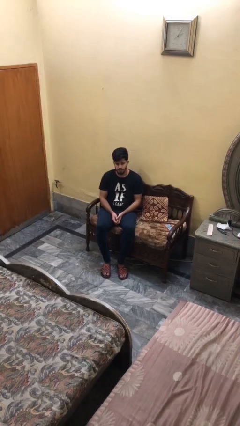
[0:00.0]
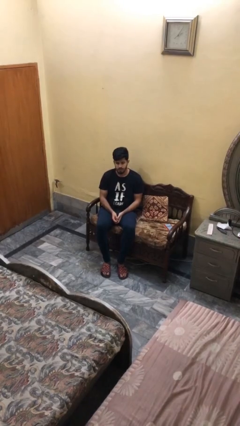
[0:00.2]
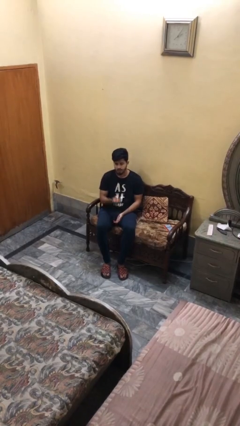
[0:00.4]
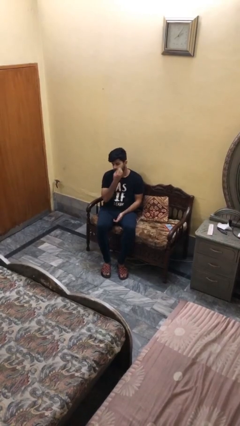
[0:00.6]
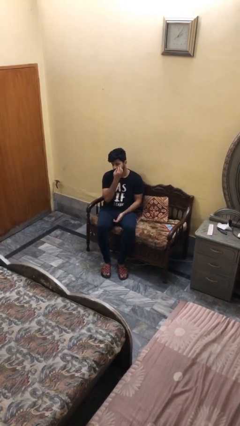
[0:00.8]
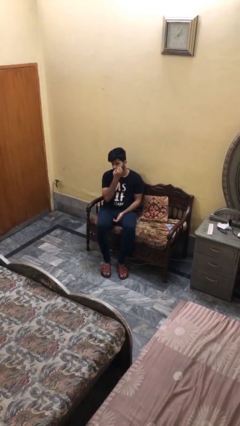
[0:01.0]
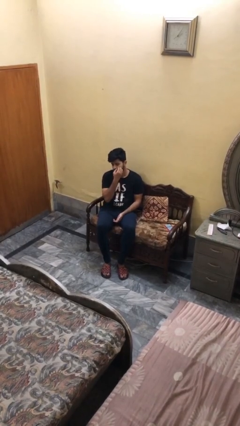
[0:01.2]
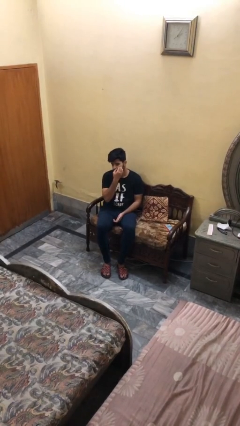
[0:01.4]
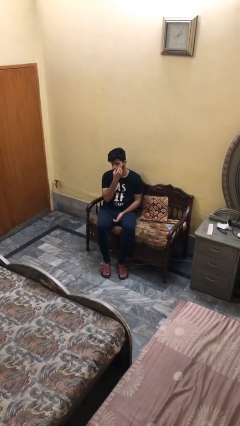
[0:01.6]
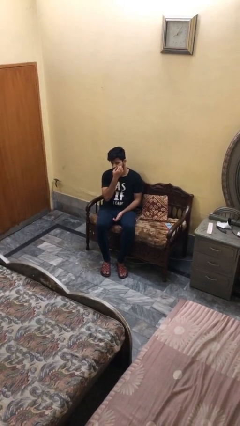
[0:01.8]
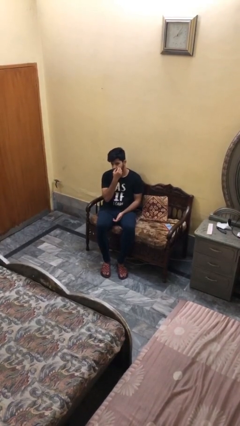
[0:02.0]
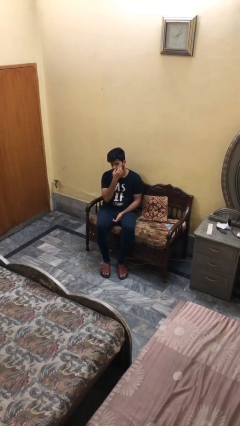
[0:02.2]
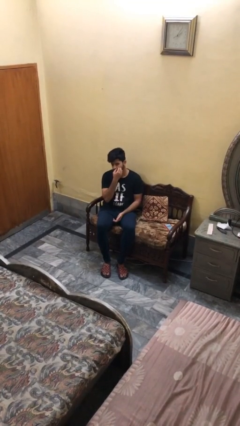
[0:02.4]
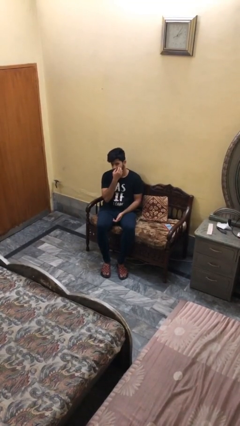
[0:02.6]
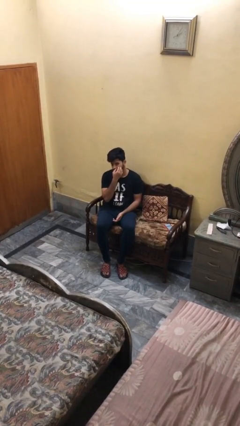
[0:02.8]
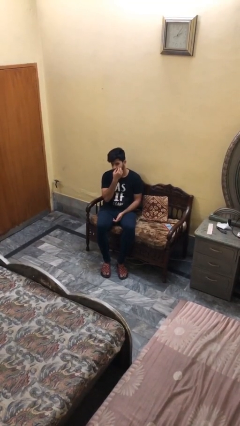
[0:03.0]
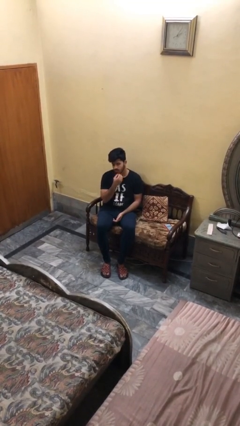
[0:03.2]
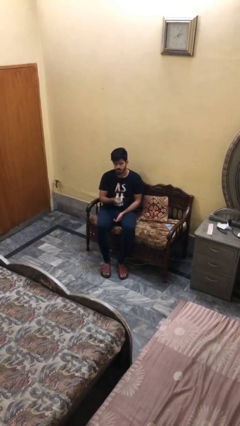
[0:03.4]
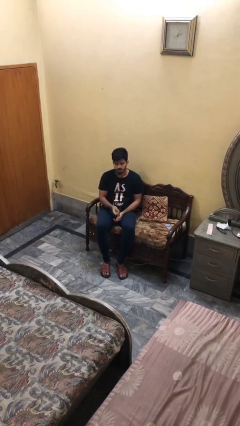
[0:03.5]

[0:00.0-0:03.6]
person scratches face

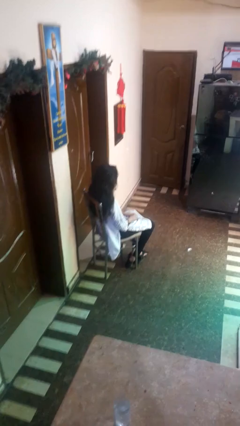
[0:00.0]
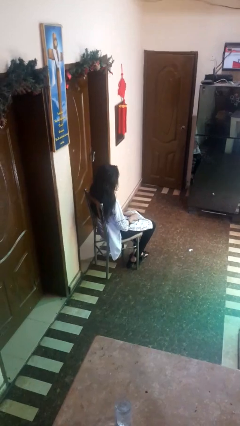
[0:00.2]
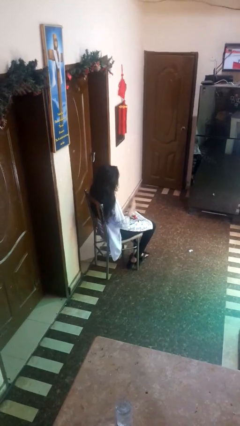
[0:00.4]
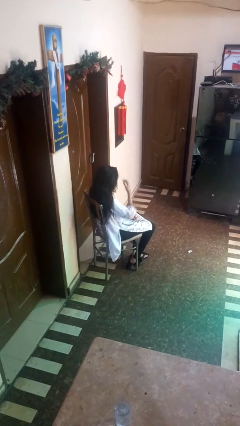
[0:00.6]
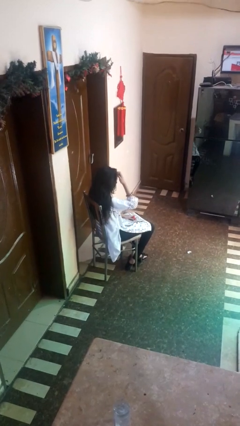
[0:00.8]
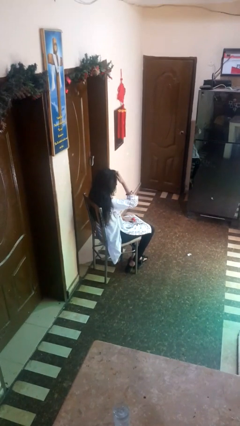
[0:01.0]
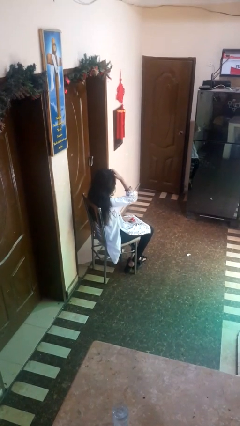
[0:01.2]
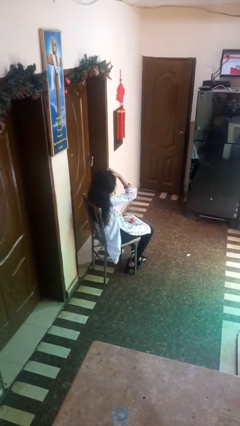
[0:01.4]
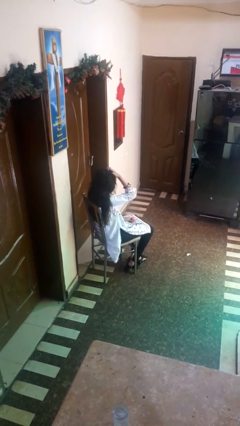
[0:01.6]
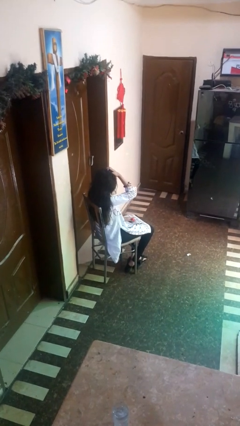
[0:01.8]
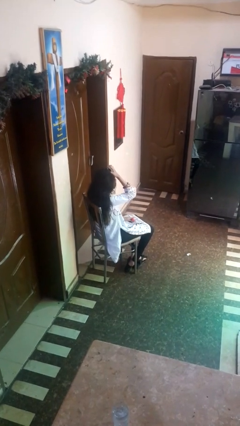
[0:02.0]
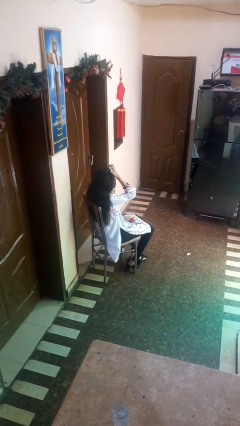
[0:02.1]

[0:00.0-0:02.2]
person strokes hair

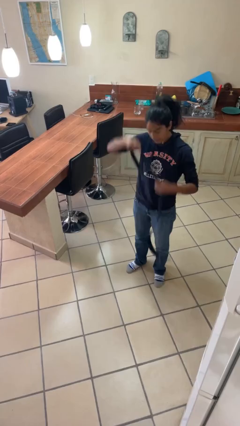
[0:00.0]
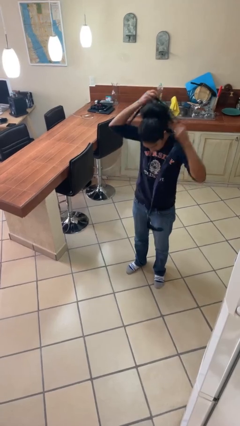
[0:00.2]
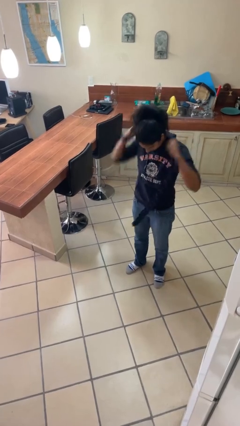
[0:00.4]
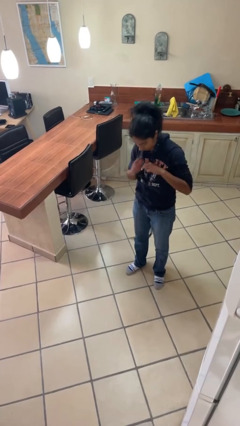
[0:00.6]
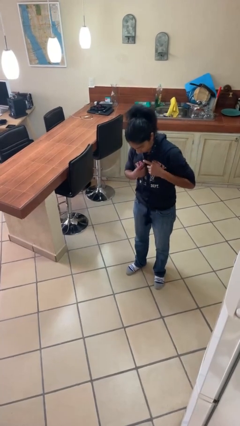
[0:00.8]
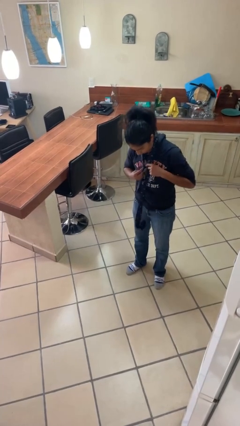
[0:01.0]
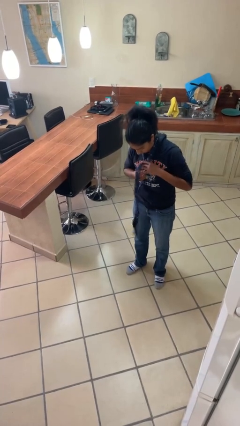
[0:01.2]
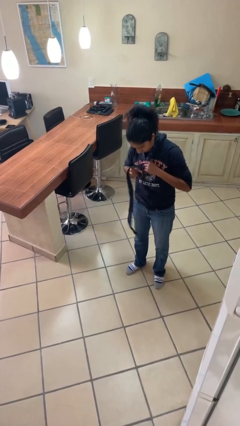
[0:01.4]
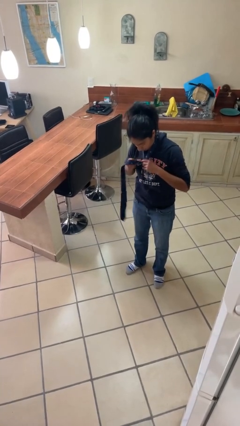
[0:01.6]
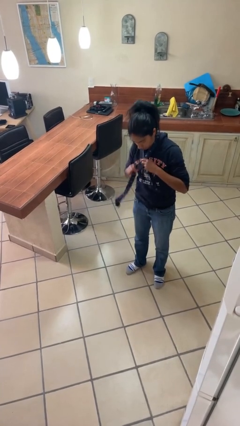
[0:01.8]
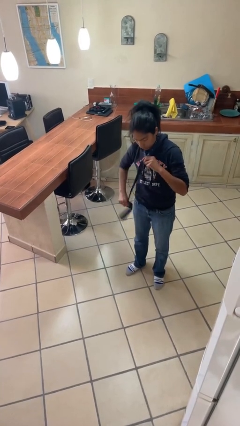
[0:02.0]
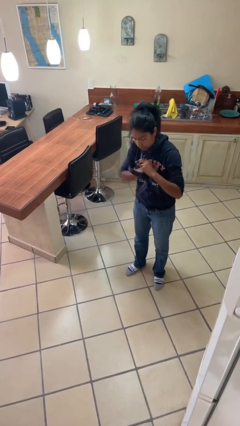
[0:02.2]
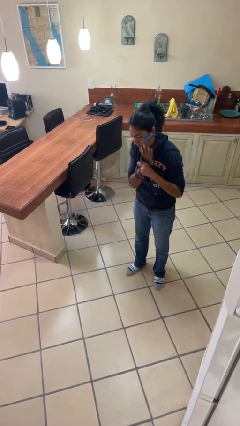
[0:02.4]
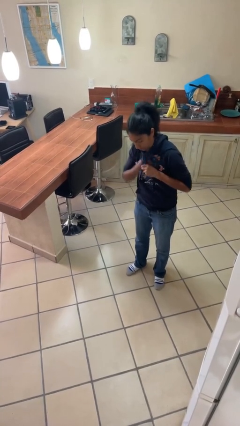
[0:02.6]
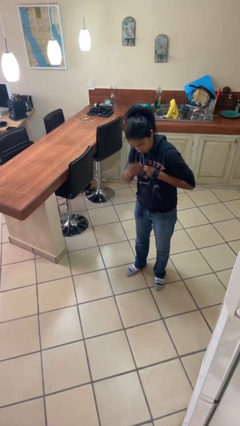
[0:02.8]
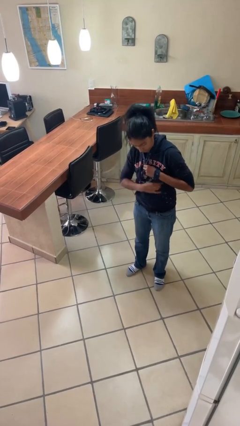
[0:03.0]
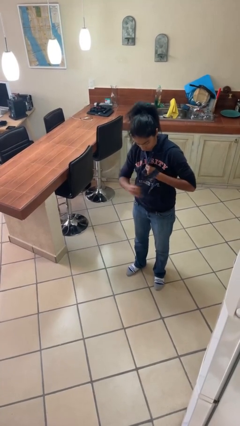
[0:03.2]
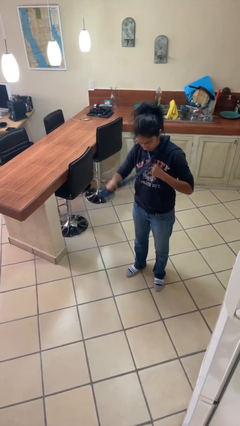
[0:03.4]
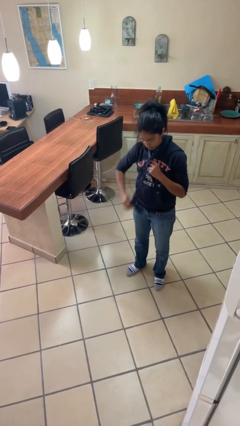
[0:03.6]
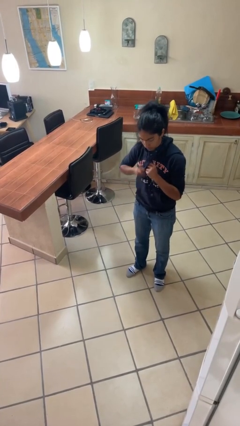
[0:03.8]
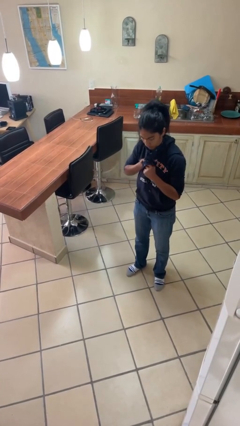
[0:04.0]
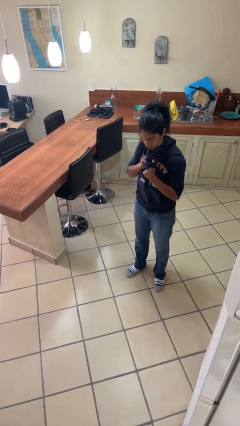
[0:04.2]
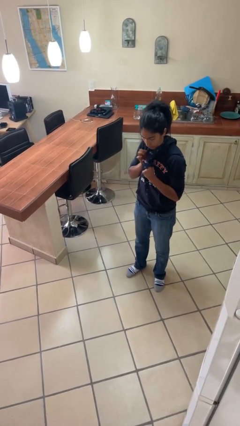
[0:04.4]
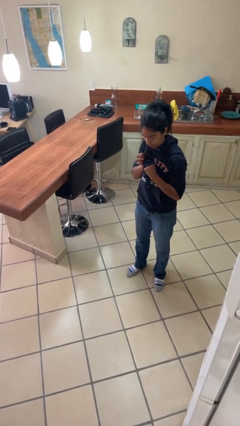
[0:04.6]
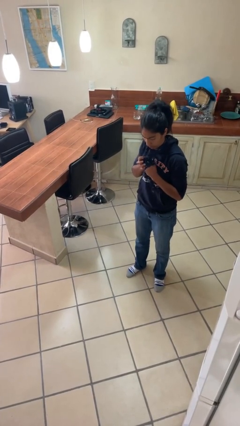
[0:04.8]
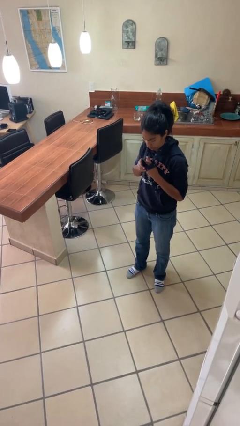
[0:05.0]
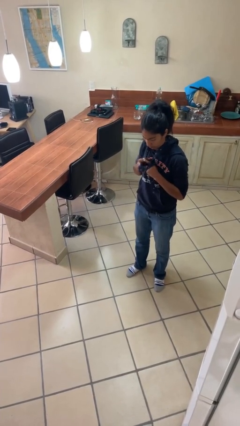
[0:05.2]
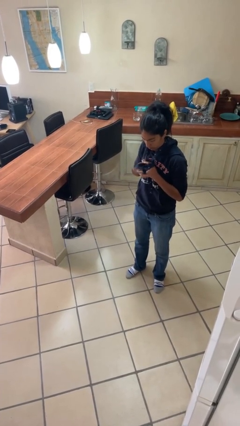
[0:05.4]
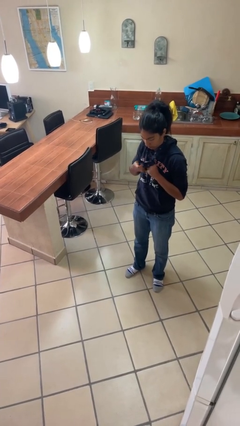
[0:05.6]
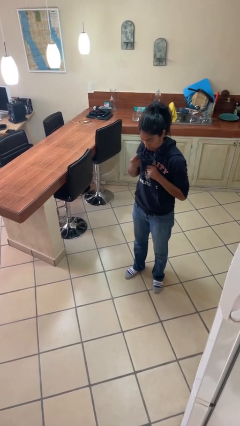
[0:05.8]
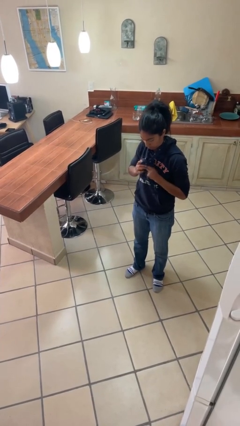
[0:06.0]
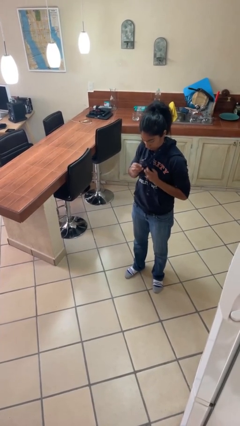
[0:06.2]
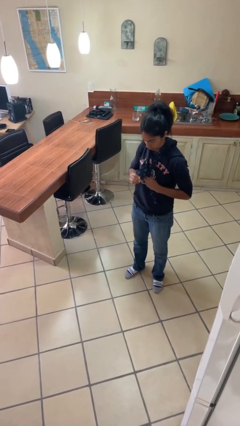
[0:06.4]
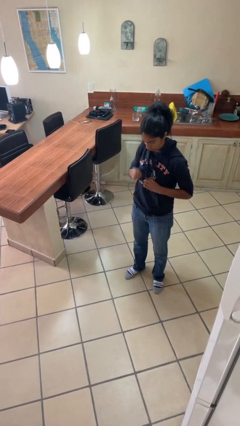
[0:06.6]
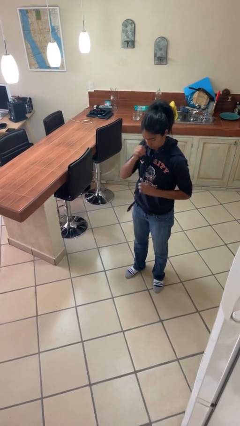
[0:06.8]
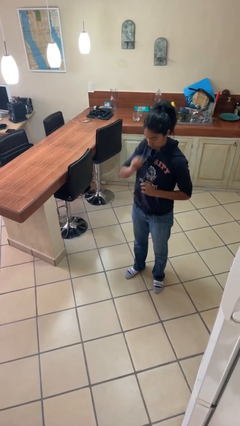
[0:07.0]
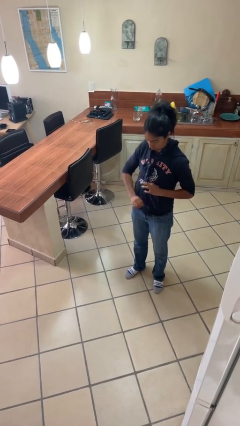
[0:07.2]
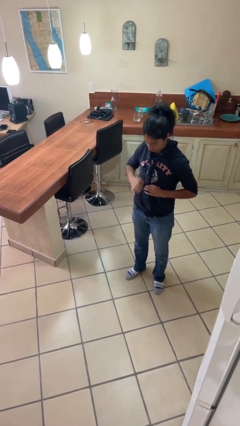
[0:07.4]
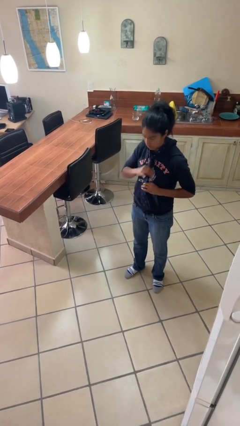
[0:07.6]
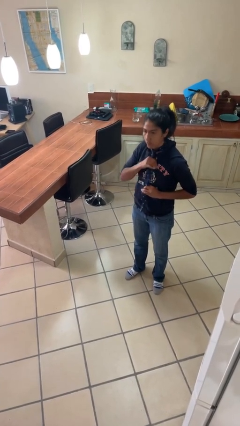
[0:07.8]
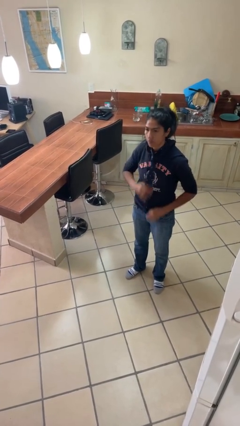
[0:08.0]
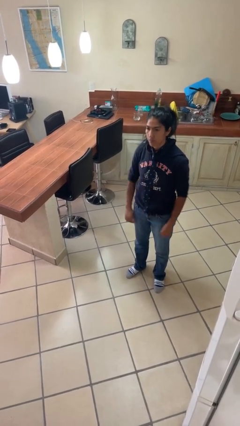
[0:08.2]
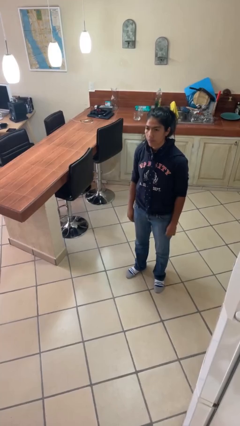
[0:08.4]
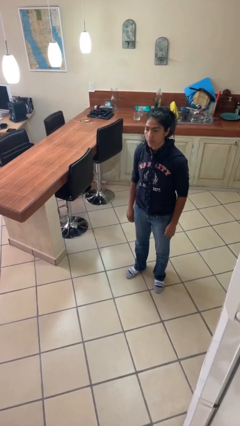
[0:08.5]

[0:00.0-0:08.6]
person puts on necktie

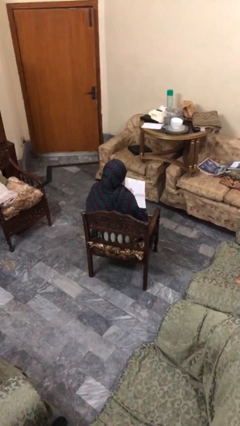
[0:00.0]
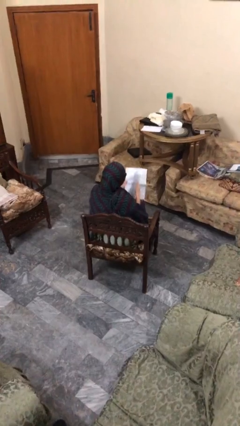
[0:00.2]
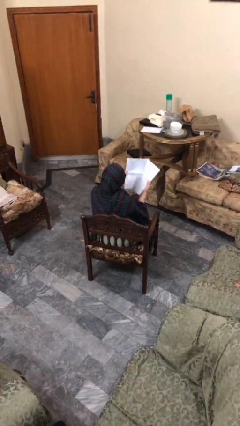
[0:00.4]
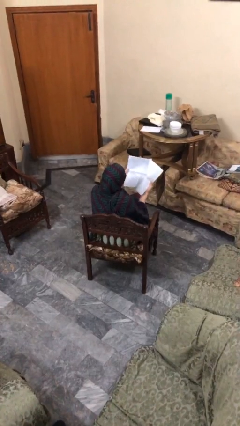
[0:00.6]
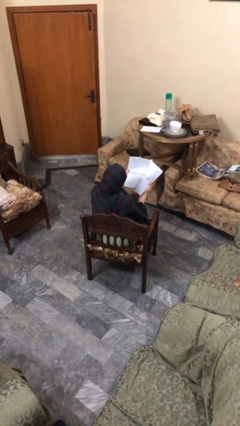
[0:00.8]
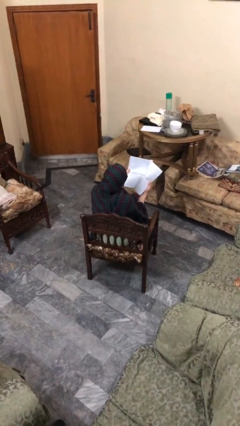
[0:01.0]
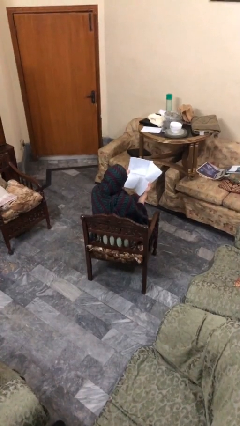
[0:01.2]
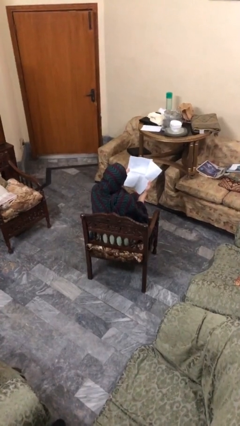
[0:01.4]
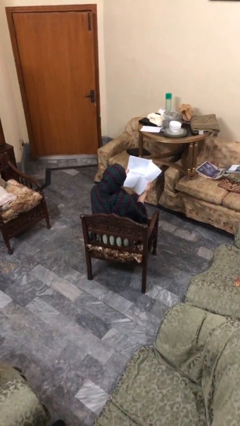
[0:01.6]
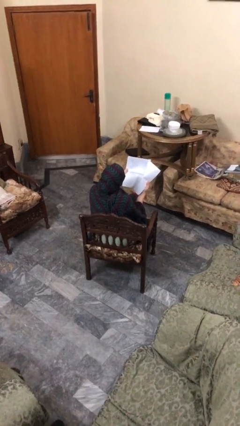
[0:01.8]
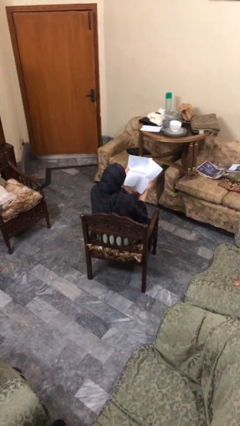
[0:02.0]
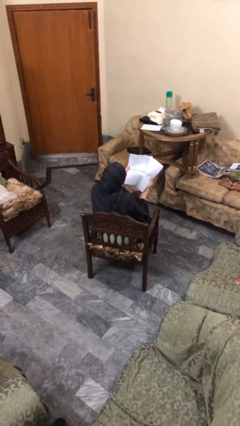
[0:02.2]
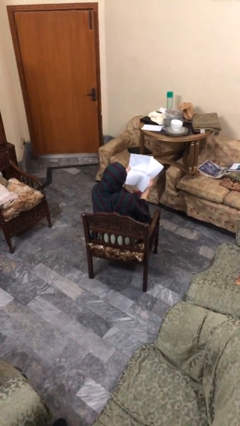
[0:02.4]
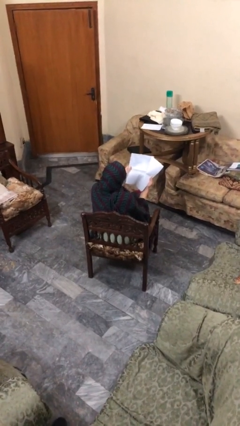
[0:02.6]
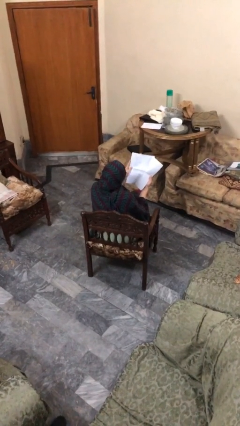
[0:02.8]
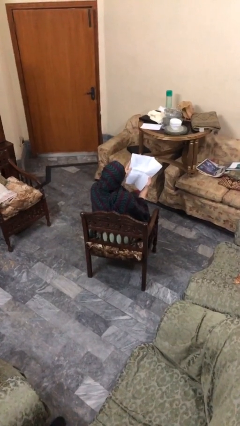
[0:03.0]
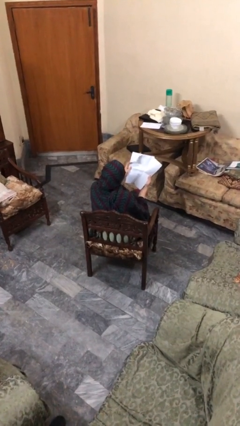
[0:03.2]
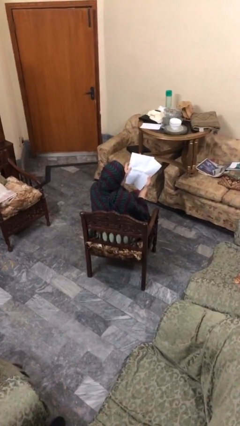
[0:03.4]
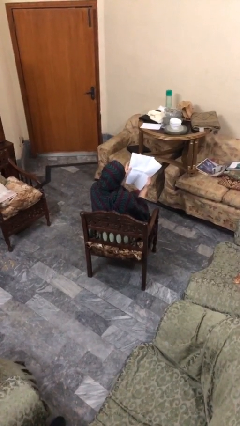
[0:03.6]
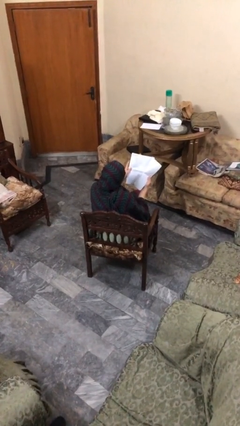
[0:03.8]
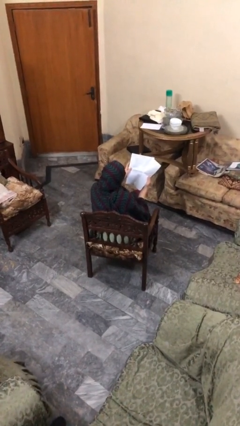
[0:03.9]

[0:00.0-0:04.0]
person reads magazine
